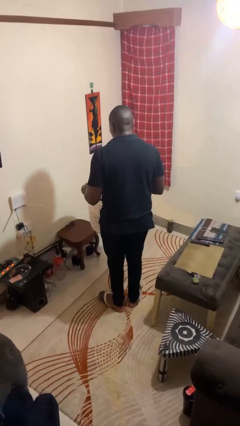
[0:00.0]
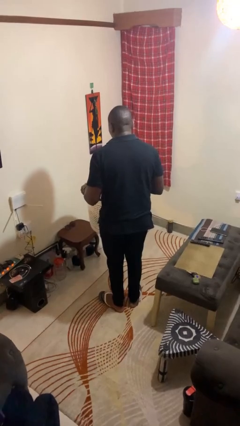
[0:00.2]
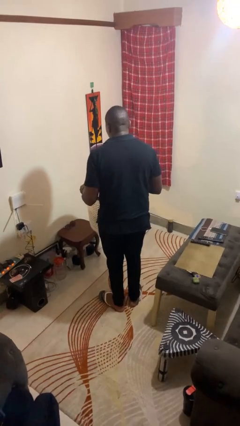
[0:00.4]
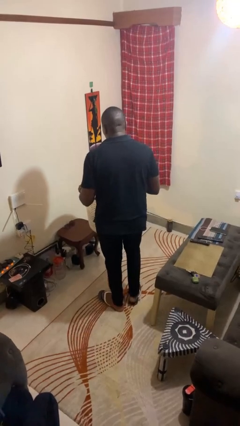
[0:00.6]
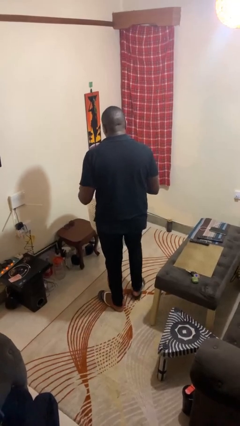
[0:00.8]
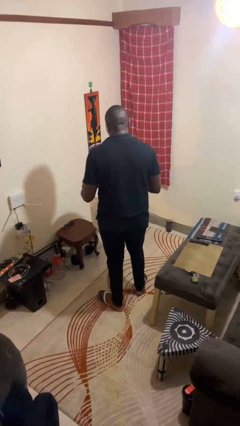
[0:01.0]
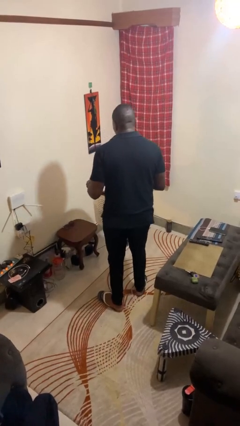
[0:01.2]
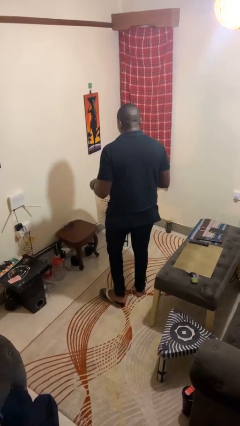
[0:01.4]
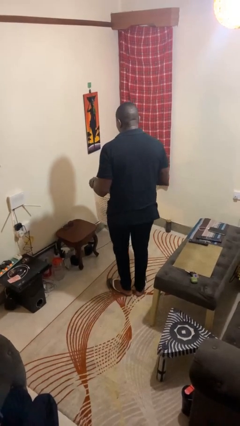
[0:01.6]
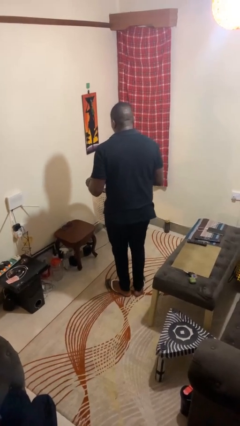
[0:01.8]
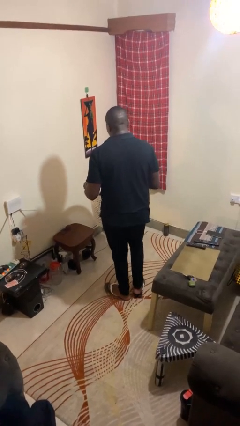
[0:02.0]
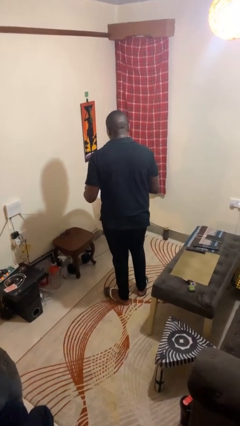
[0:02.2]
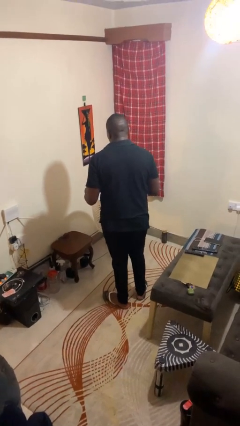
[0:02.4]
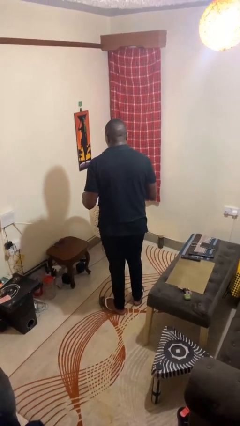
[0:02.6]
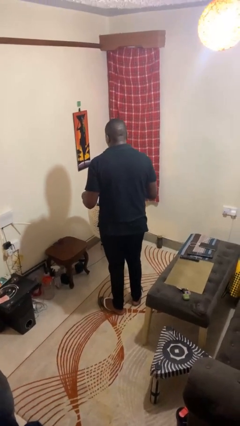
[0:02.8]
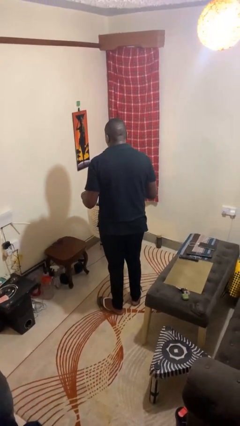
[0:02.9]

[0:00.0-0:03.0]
person carries laundry basket

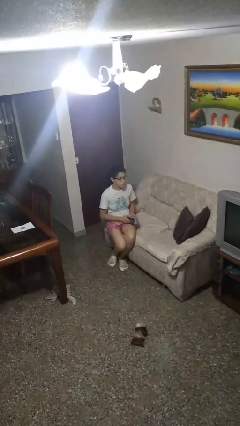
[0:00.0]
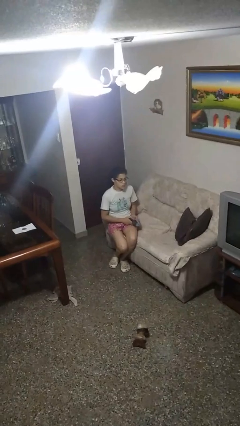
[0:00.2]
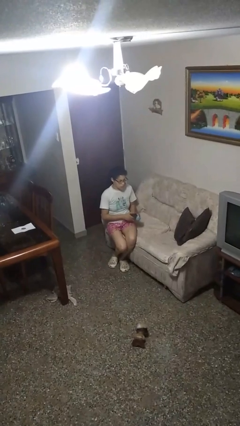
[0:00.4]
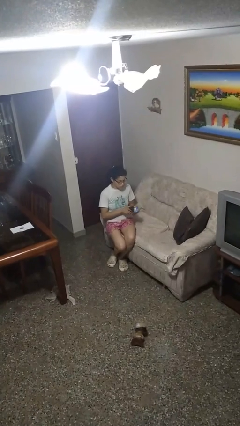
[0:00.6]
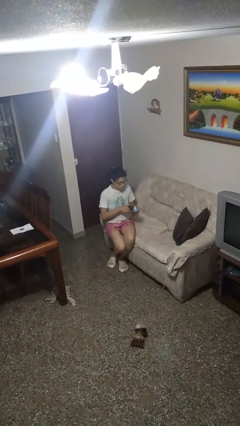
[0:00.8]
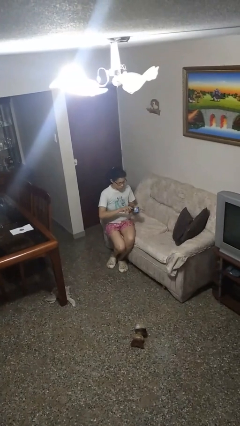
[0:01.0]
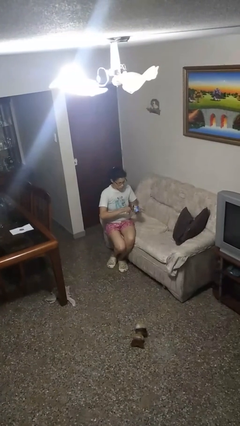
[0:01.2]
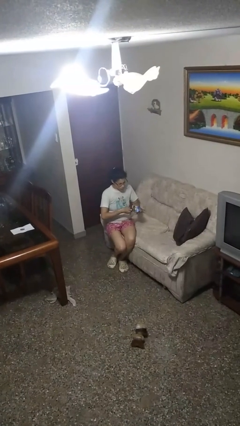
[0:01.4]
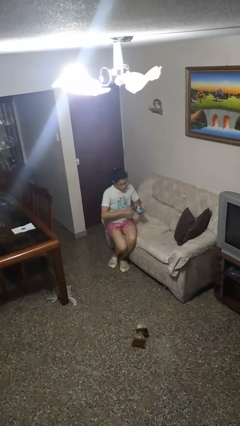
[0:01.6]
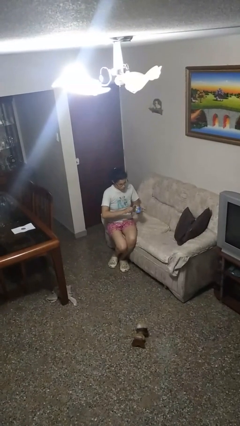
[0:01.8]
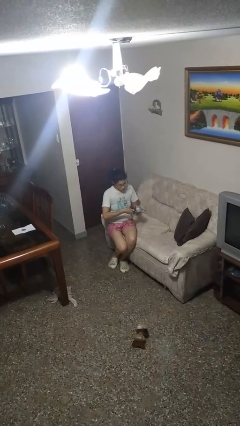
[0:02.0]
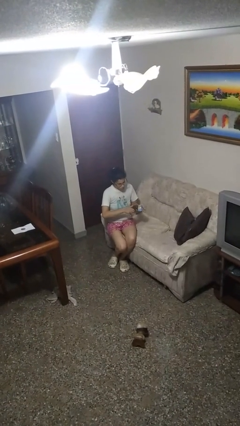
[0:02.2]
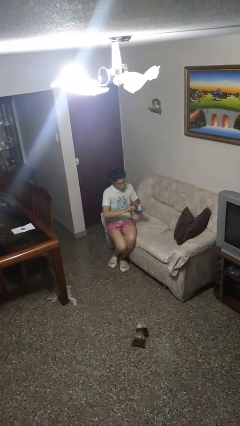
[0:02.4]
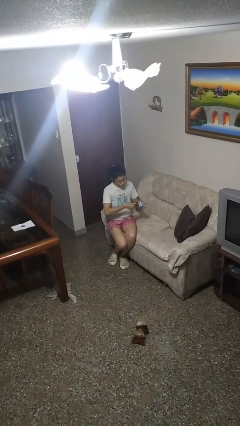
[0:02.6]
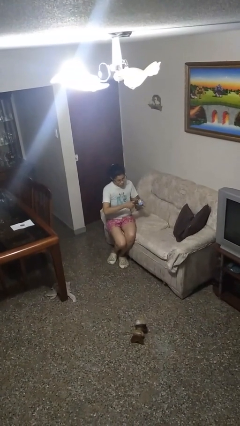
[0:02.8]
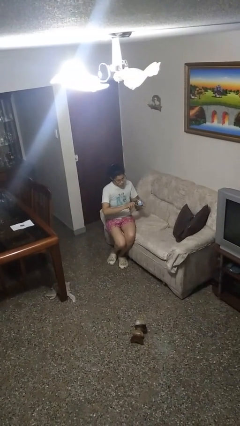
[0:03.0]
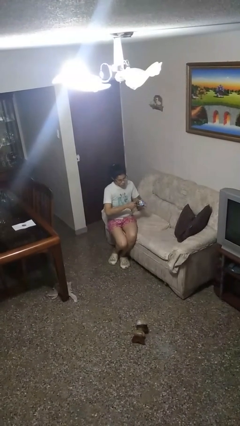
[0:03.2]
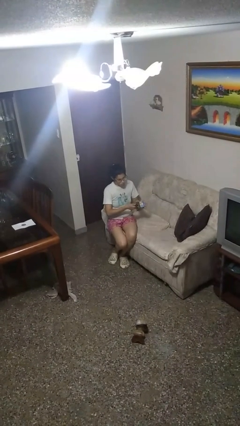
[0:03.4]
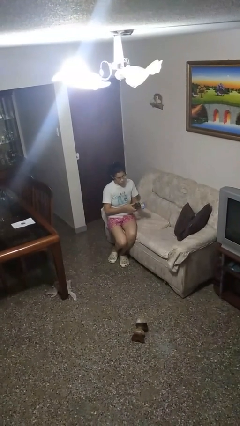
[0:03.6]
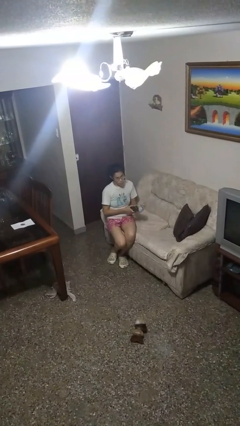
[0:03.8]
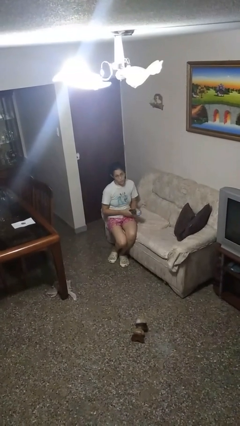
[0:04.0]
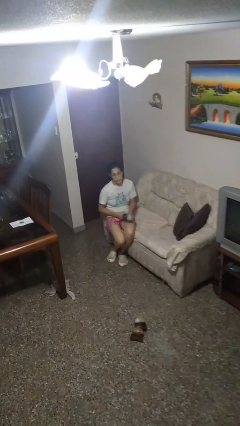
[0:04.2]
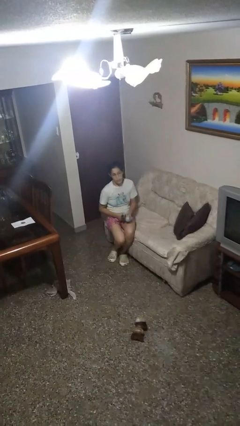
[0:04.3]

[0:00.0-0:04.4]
person opens can with can opener

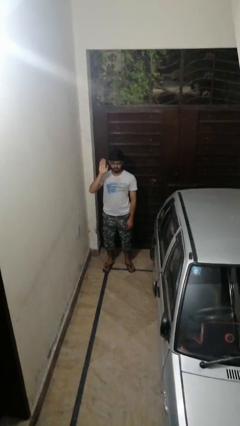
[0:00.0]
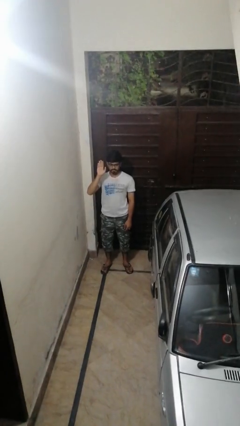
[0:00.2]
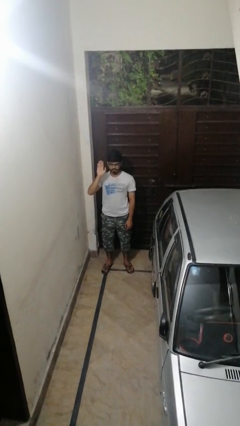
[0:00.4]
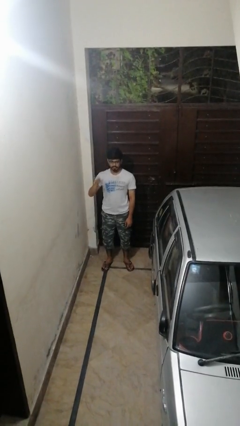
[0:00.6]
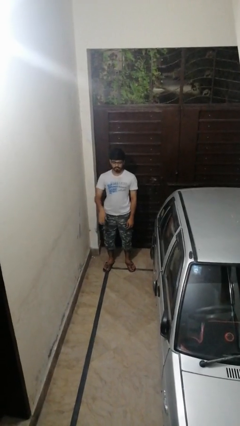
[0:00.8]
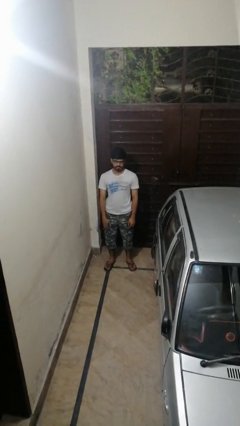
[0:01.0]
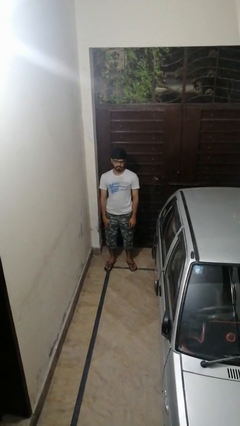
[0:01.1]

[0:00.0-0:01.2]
person gestures lower hand

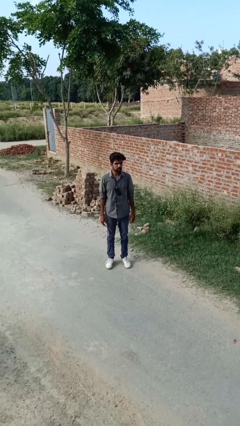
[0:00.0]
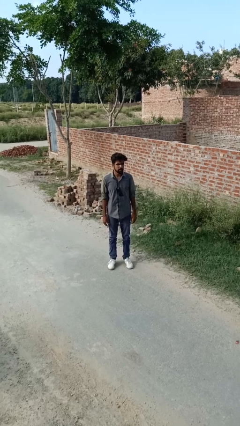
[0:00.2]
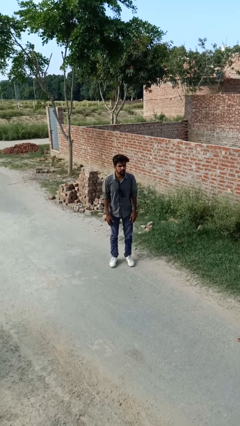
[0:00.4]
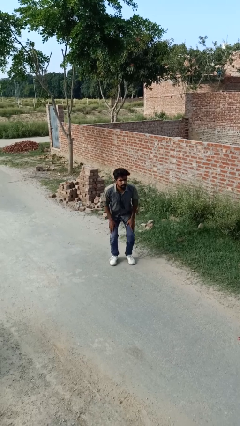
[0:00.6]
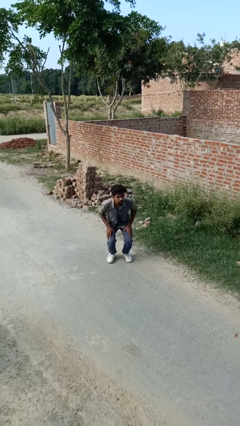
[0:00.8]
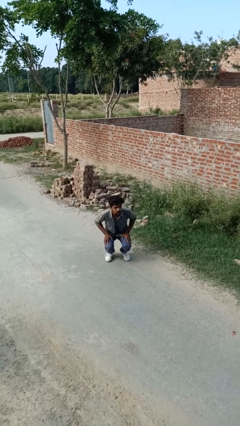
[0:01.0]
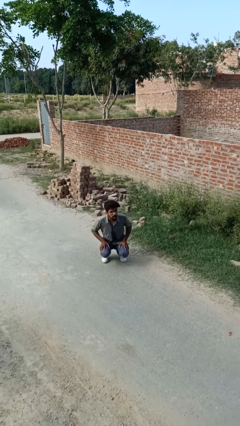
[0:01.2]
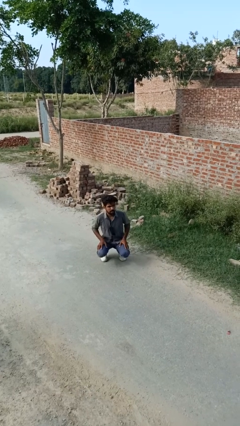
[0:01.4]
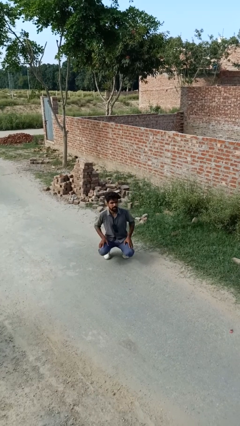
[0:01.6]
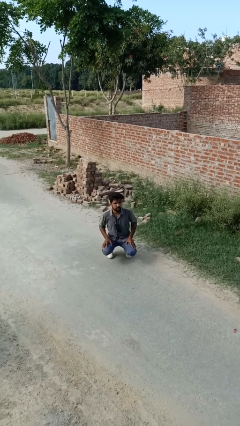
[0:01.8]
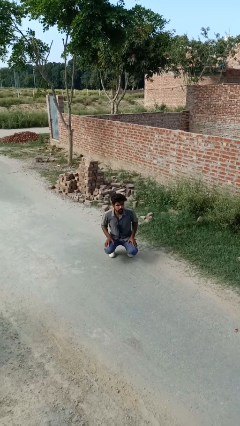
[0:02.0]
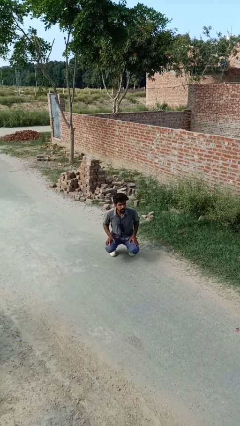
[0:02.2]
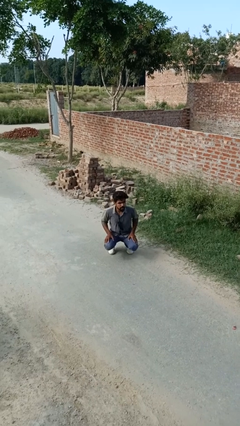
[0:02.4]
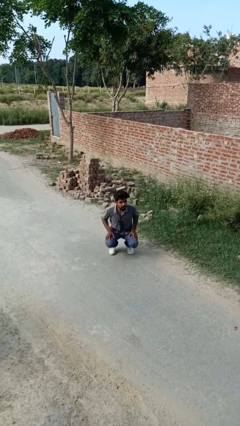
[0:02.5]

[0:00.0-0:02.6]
person kneels

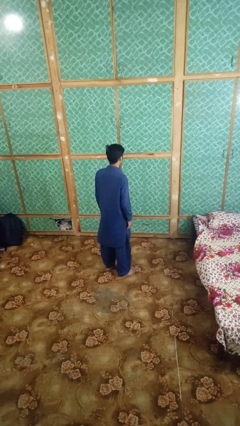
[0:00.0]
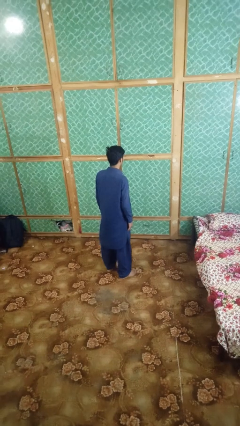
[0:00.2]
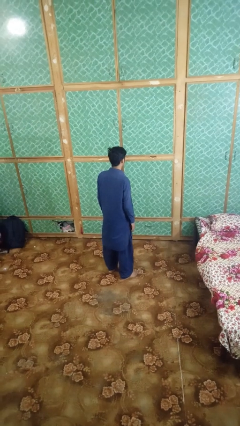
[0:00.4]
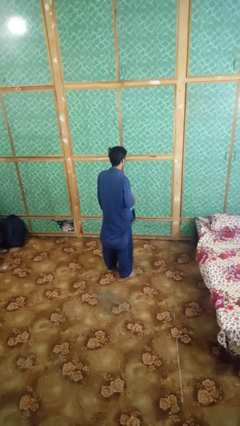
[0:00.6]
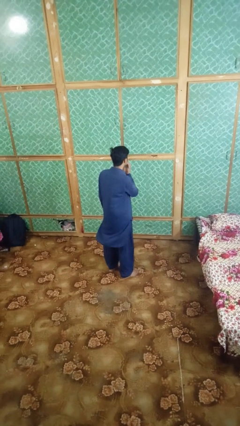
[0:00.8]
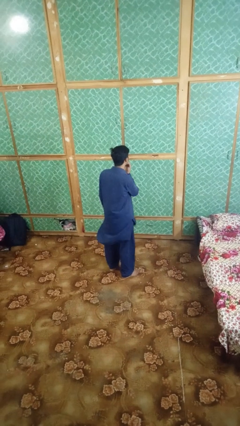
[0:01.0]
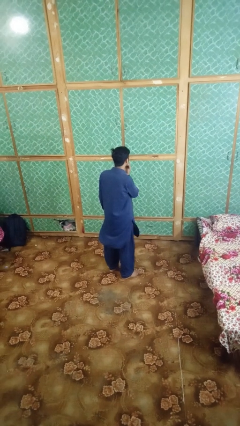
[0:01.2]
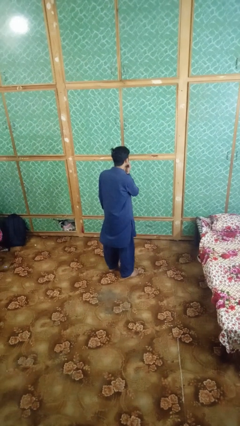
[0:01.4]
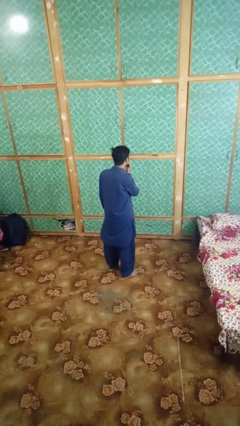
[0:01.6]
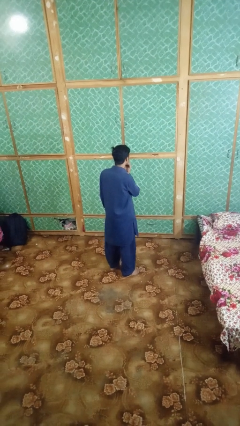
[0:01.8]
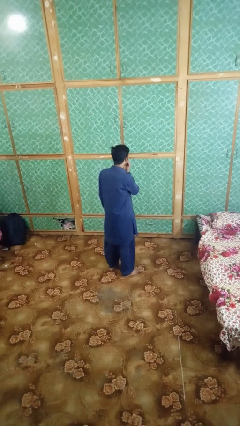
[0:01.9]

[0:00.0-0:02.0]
person strokes chin

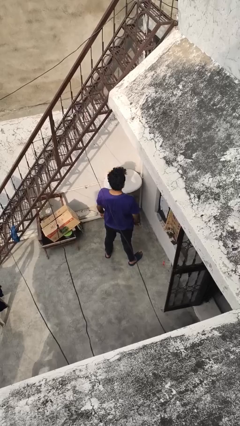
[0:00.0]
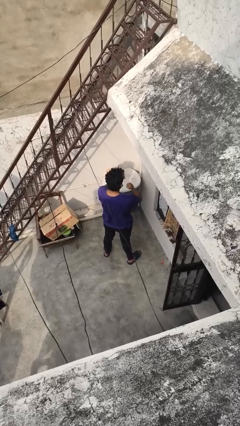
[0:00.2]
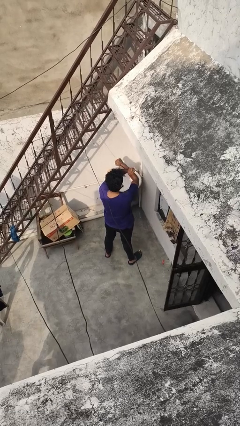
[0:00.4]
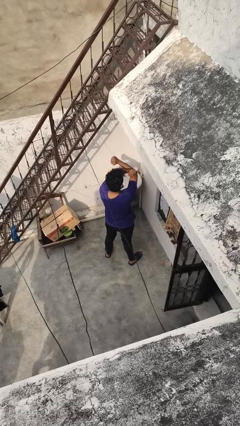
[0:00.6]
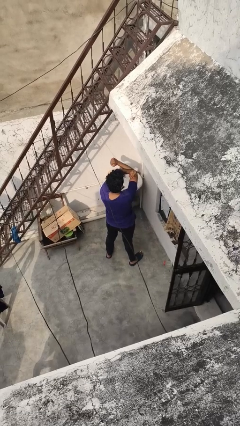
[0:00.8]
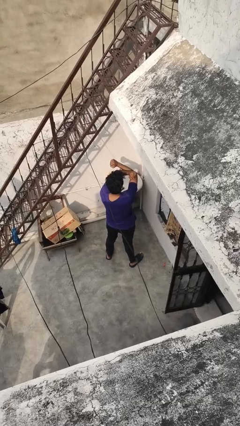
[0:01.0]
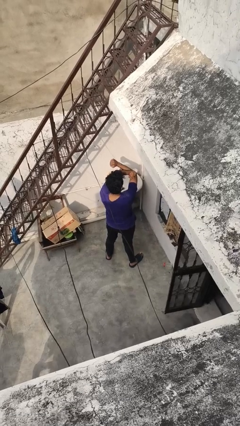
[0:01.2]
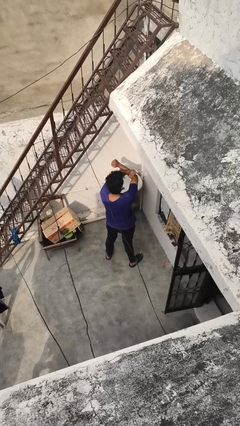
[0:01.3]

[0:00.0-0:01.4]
person gestures arms x

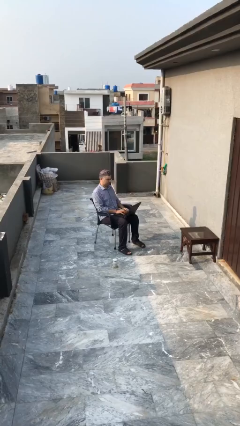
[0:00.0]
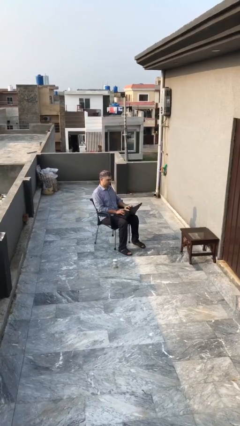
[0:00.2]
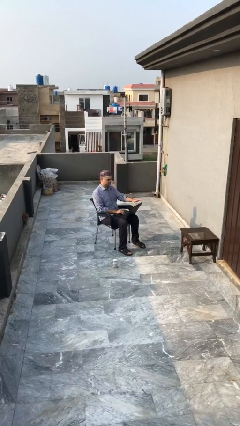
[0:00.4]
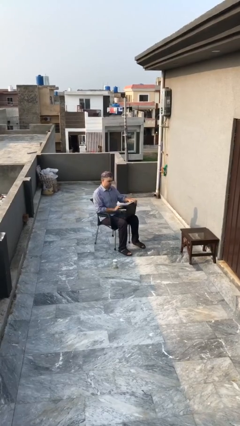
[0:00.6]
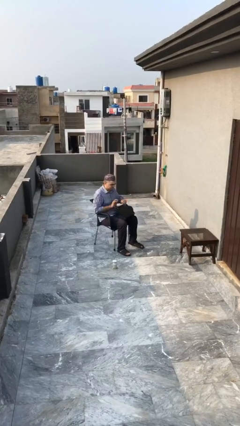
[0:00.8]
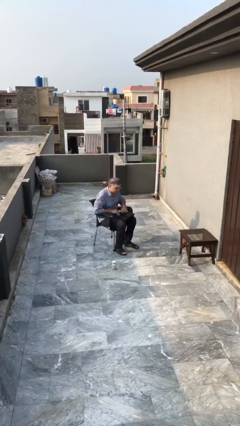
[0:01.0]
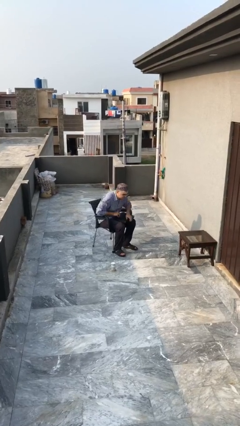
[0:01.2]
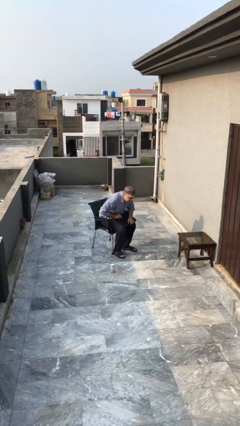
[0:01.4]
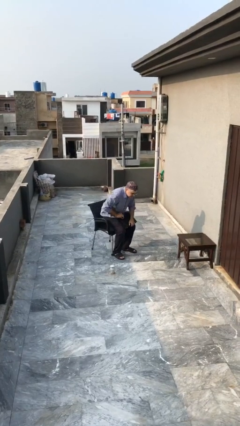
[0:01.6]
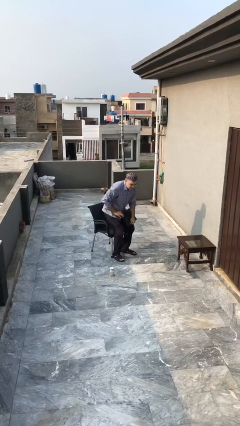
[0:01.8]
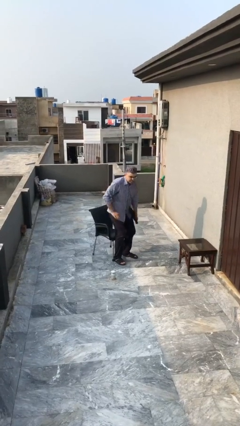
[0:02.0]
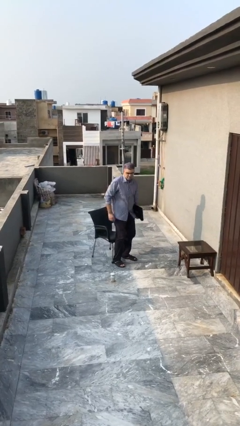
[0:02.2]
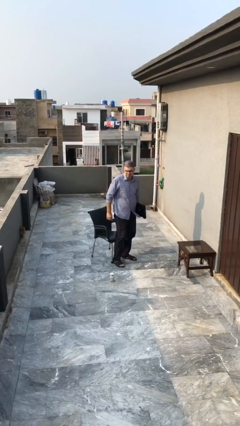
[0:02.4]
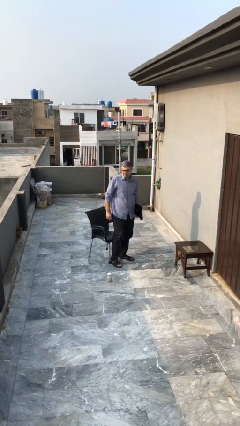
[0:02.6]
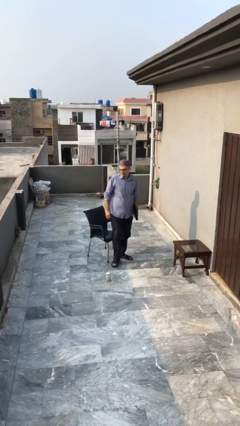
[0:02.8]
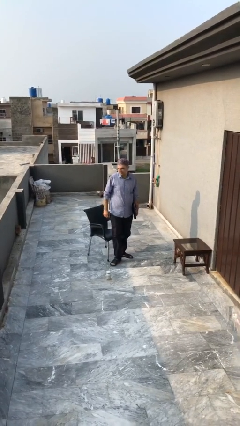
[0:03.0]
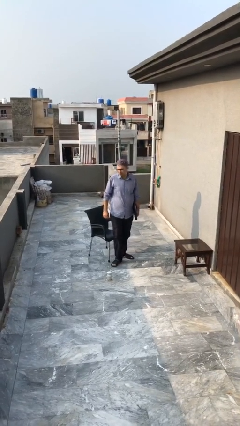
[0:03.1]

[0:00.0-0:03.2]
person stands up
